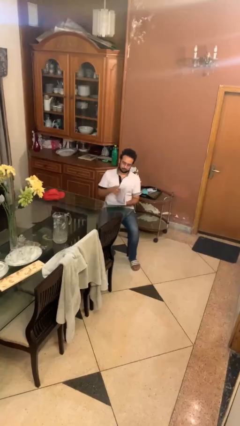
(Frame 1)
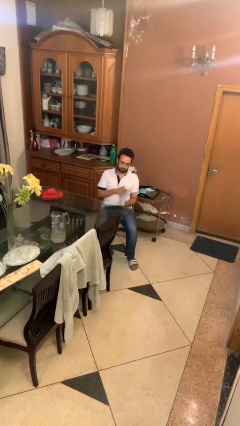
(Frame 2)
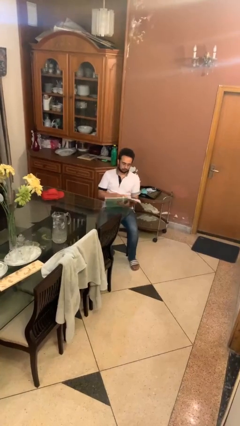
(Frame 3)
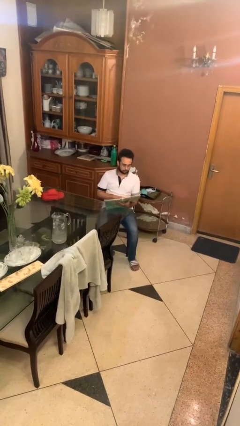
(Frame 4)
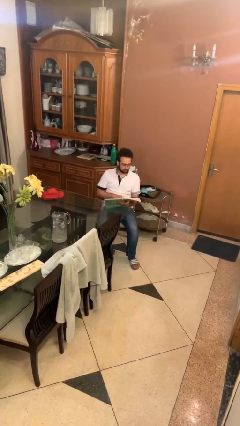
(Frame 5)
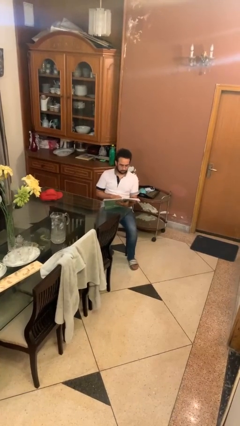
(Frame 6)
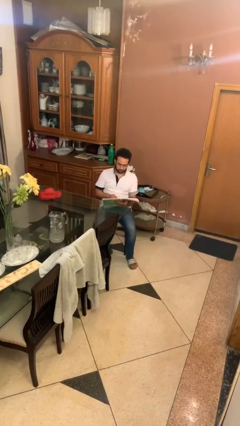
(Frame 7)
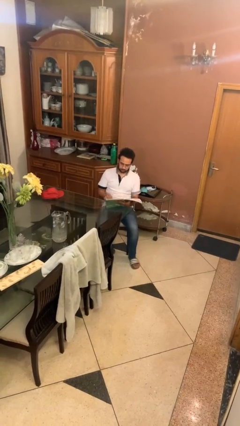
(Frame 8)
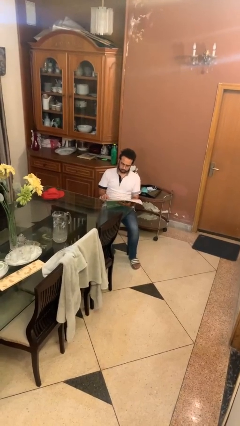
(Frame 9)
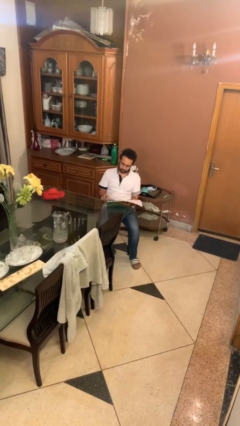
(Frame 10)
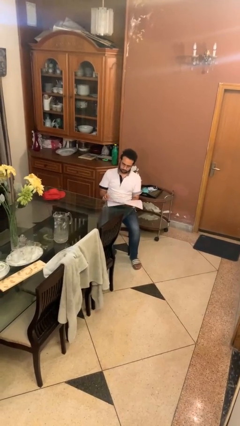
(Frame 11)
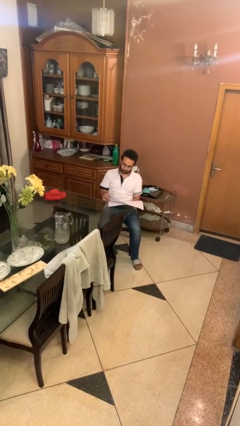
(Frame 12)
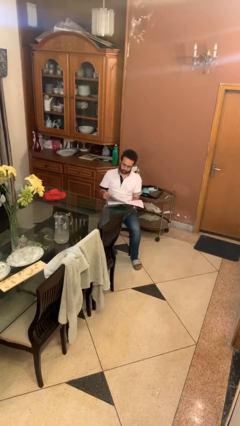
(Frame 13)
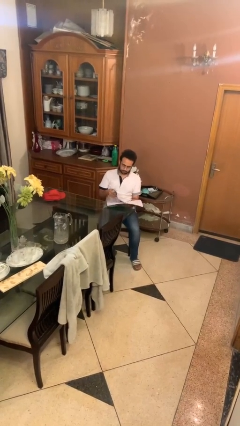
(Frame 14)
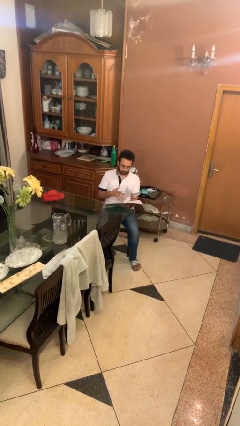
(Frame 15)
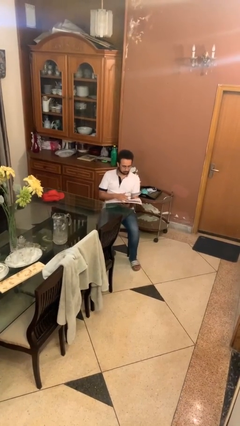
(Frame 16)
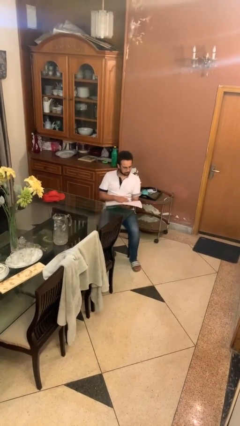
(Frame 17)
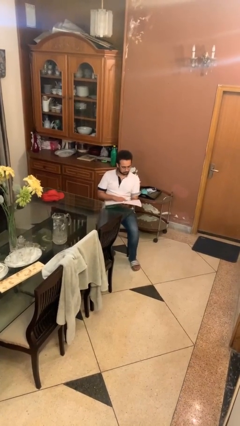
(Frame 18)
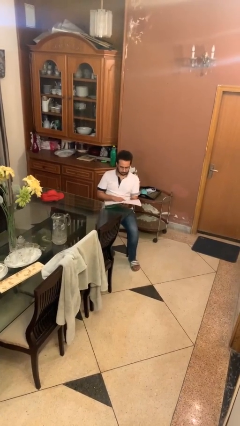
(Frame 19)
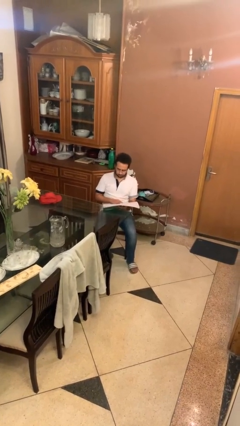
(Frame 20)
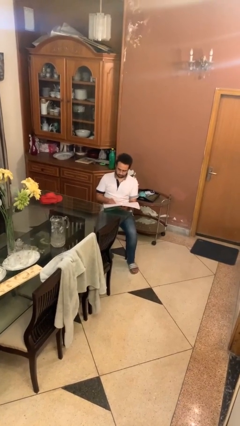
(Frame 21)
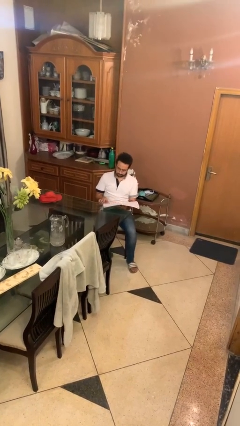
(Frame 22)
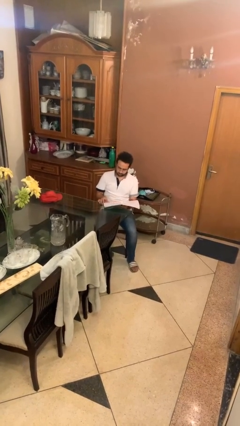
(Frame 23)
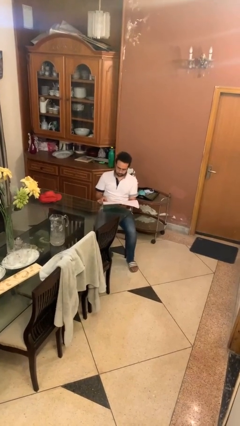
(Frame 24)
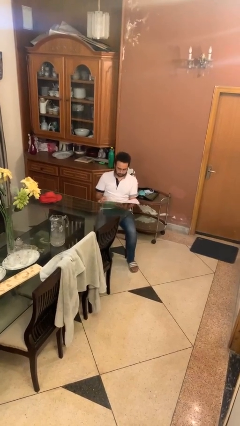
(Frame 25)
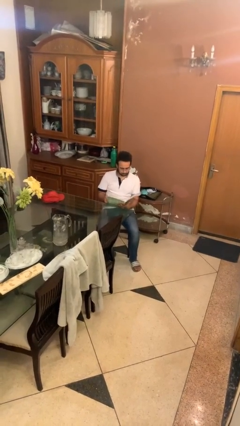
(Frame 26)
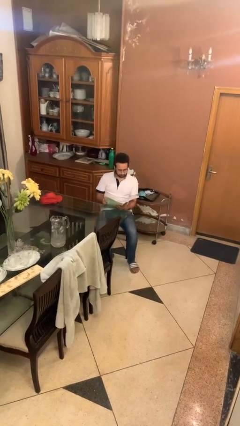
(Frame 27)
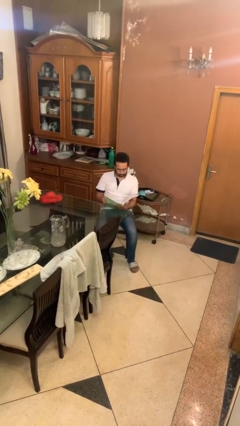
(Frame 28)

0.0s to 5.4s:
person reads document

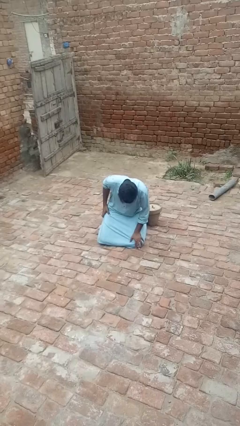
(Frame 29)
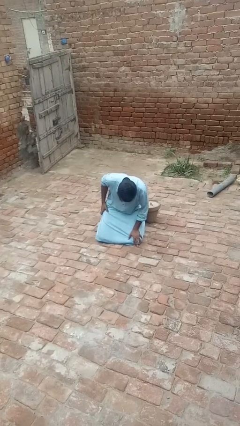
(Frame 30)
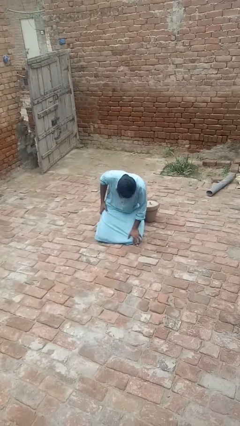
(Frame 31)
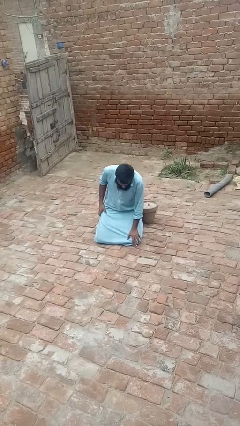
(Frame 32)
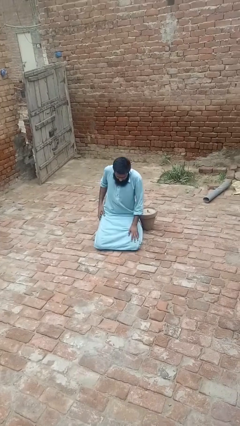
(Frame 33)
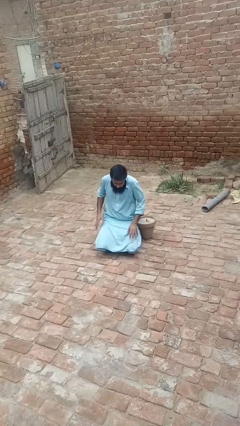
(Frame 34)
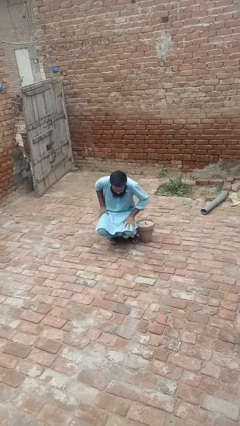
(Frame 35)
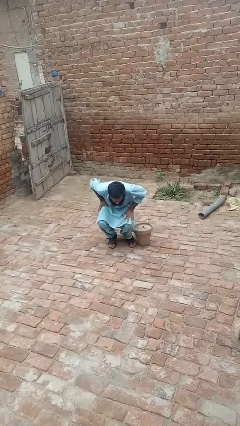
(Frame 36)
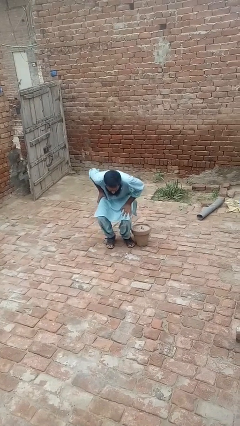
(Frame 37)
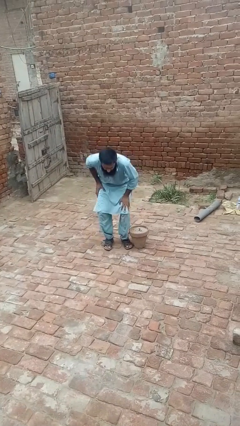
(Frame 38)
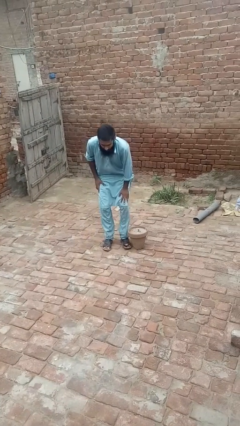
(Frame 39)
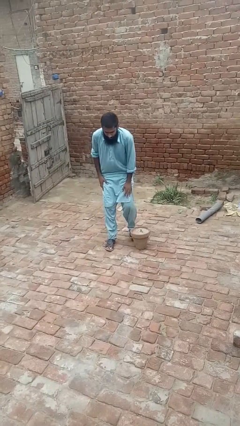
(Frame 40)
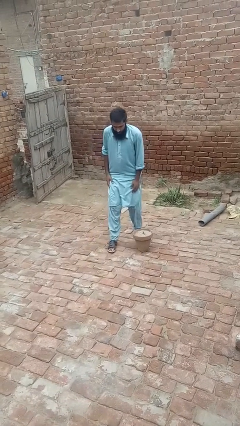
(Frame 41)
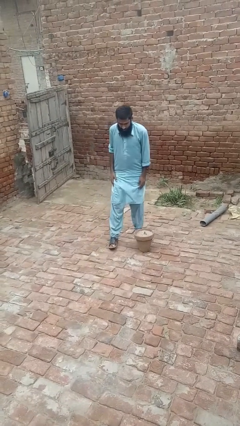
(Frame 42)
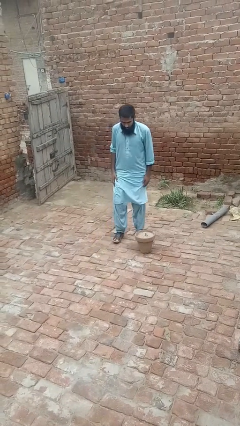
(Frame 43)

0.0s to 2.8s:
person stands up from floor

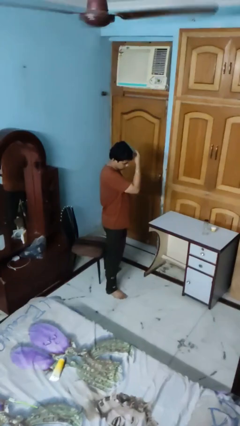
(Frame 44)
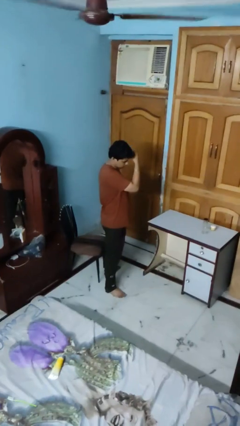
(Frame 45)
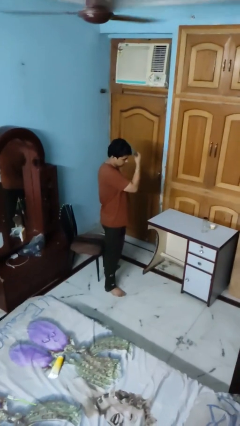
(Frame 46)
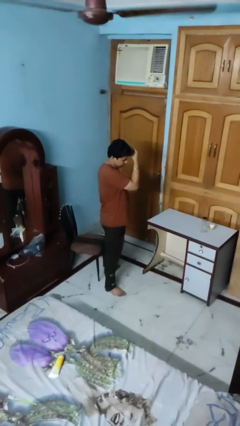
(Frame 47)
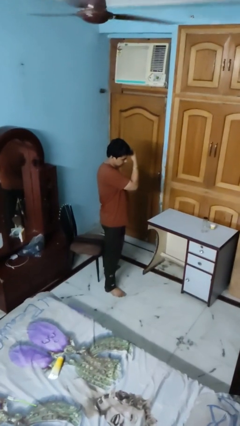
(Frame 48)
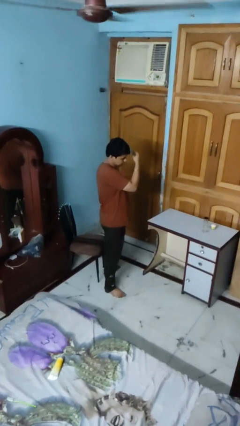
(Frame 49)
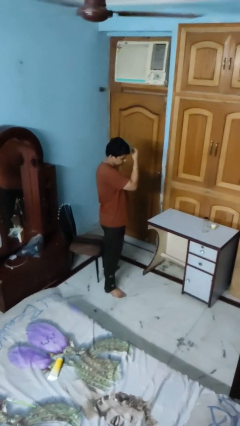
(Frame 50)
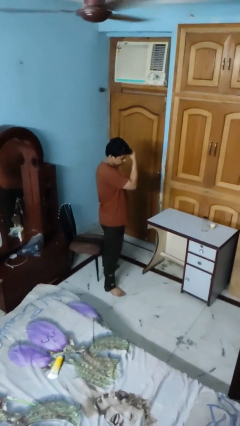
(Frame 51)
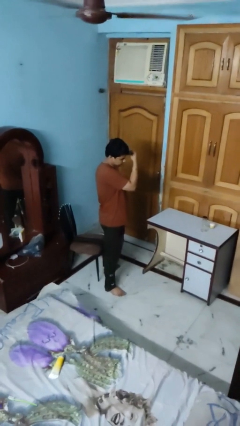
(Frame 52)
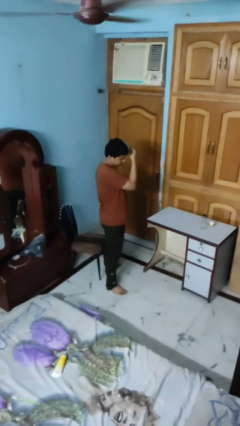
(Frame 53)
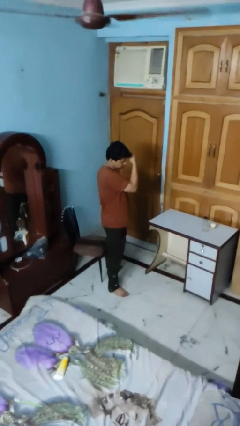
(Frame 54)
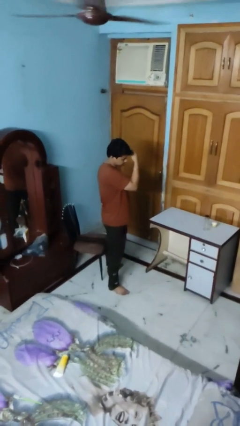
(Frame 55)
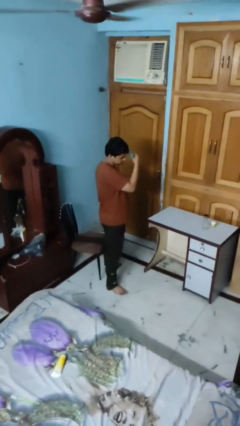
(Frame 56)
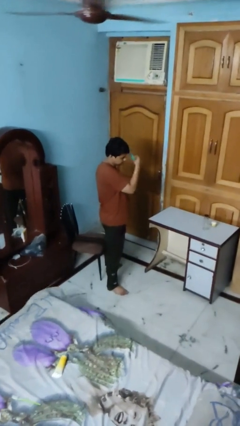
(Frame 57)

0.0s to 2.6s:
person brushes hair

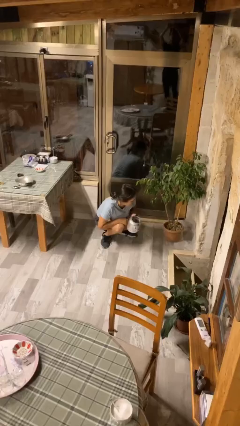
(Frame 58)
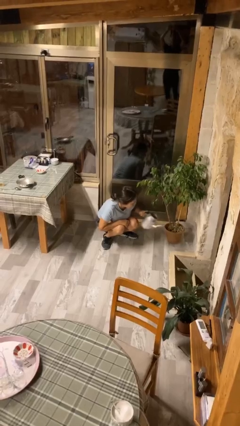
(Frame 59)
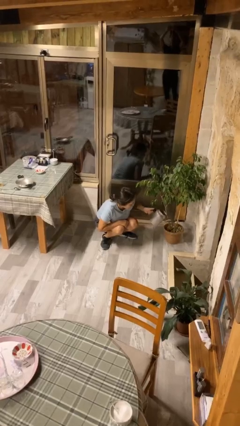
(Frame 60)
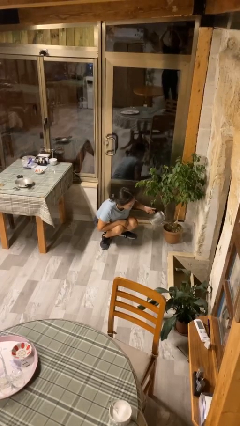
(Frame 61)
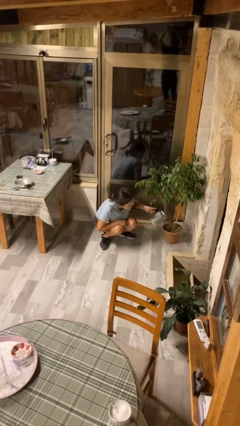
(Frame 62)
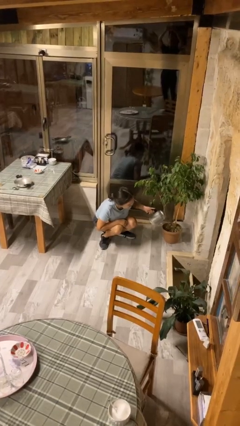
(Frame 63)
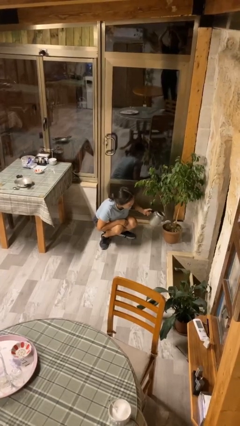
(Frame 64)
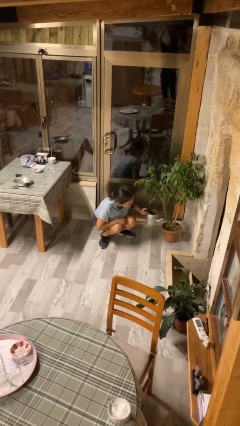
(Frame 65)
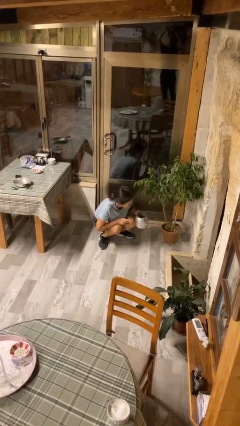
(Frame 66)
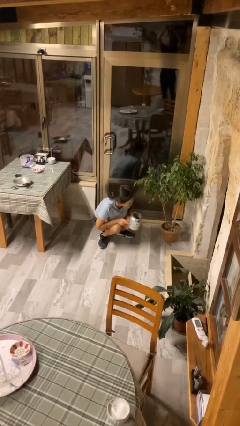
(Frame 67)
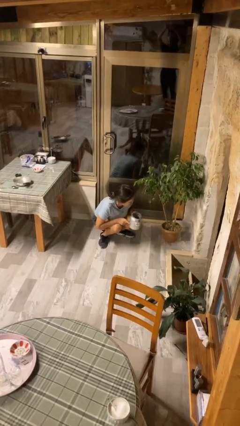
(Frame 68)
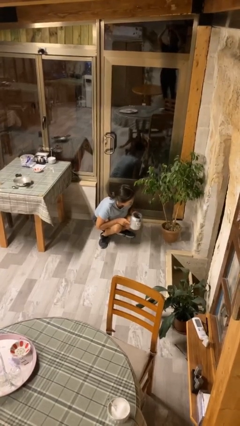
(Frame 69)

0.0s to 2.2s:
person waters houseplant

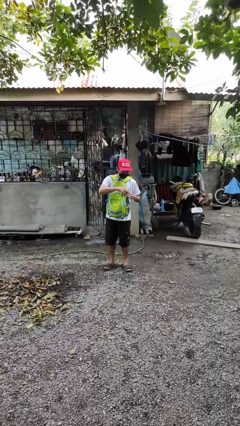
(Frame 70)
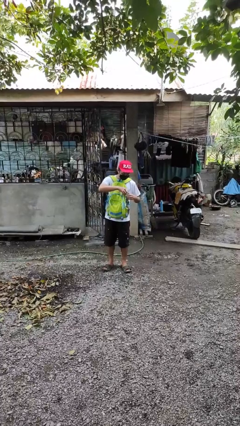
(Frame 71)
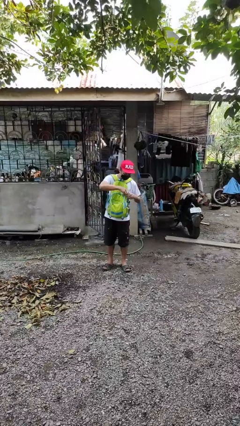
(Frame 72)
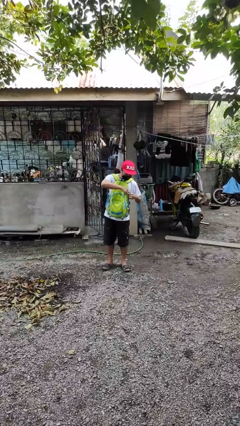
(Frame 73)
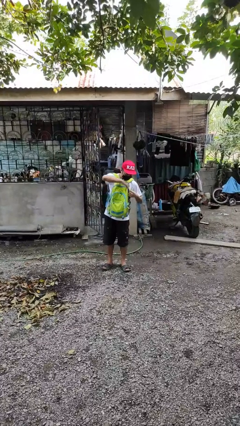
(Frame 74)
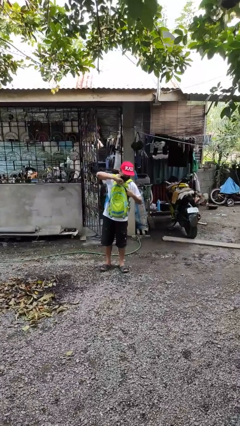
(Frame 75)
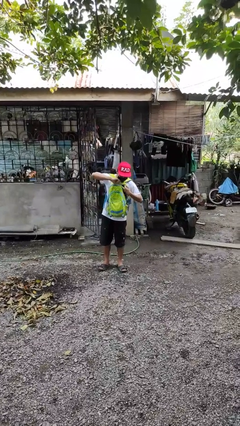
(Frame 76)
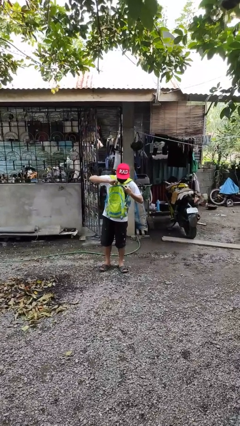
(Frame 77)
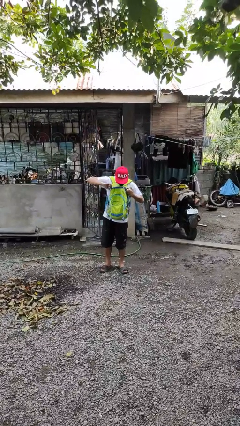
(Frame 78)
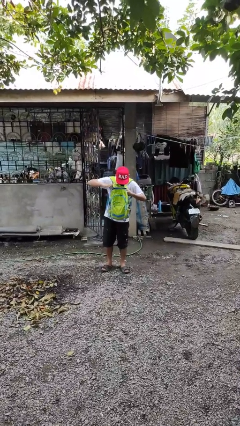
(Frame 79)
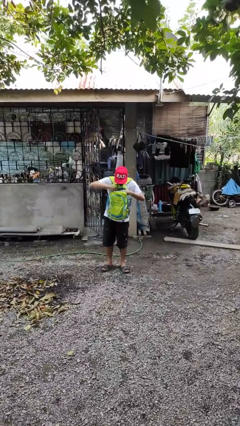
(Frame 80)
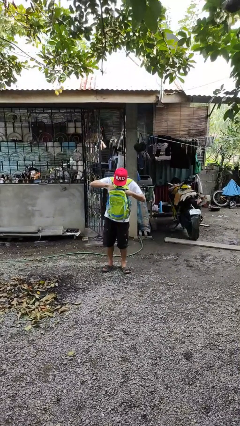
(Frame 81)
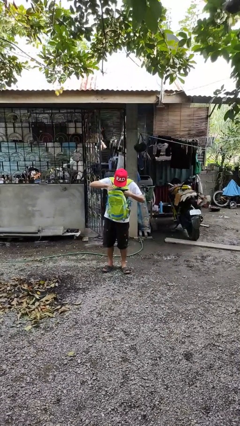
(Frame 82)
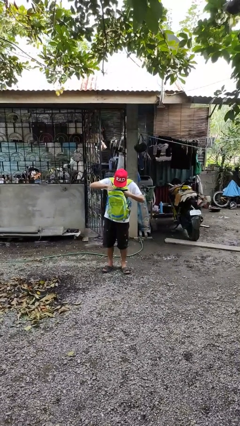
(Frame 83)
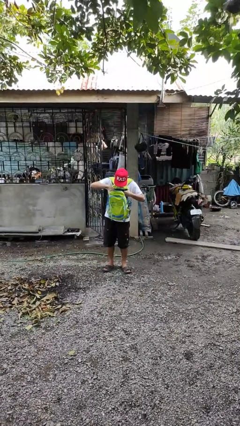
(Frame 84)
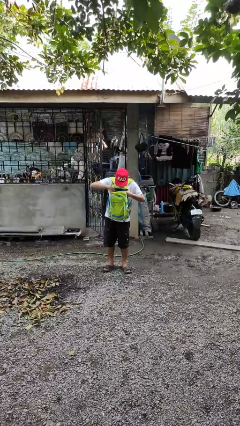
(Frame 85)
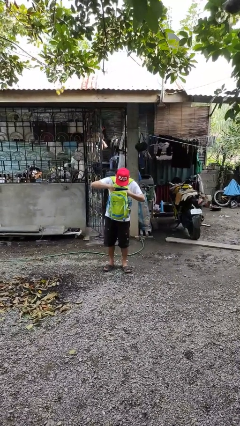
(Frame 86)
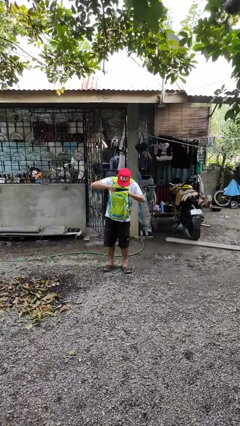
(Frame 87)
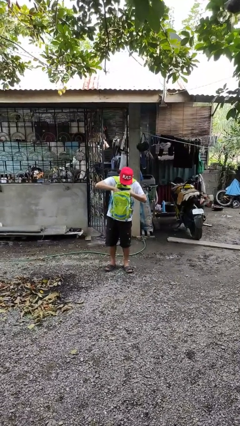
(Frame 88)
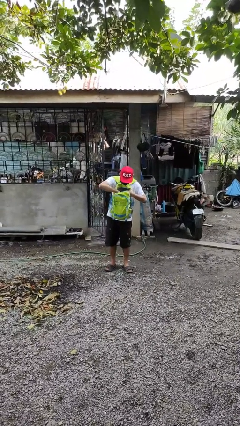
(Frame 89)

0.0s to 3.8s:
person searches in backpack

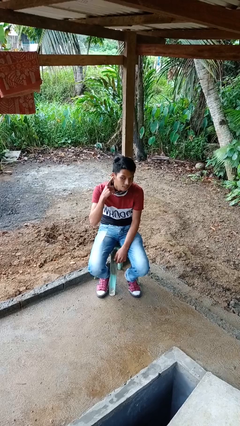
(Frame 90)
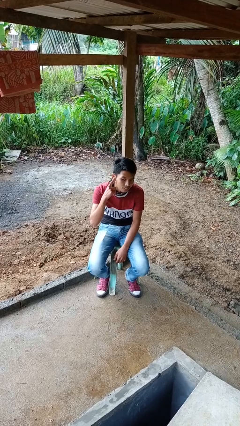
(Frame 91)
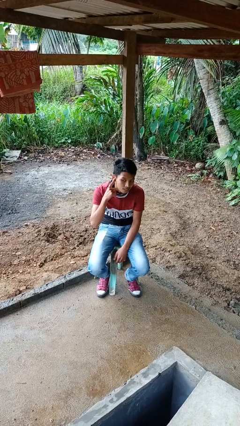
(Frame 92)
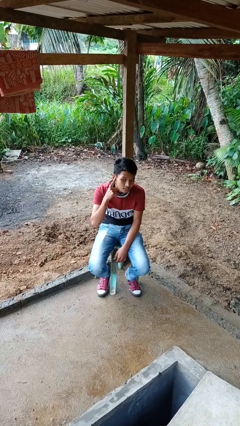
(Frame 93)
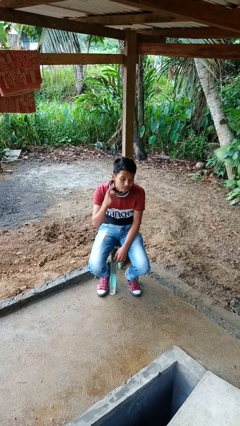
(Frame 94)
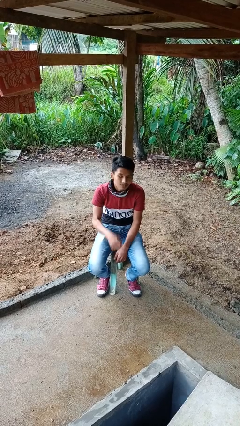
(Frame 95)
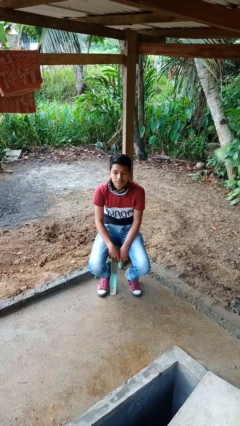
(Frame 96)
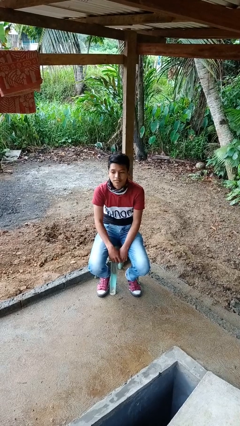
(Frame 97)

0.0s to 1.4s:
person gestures listen closely
